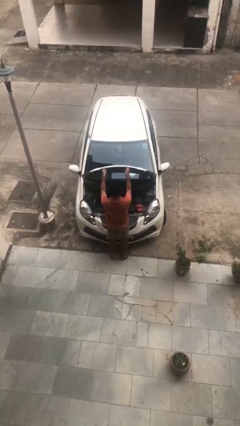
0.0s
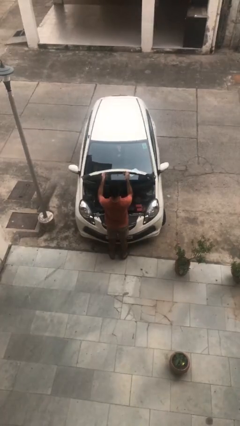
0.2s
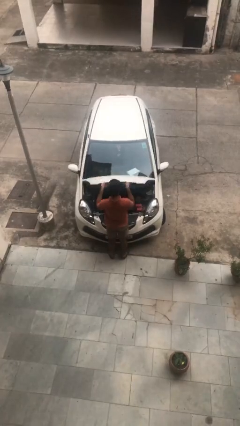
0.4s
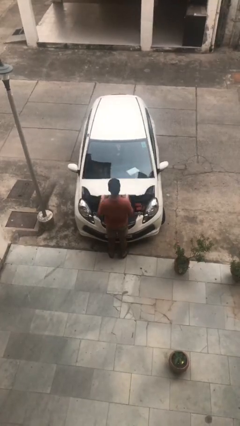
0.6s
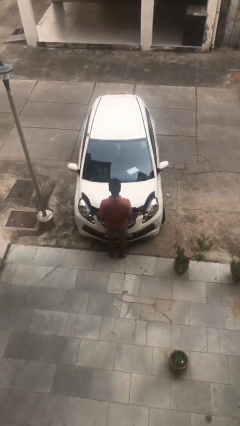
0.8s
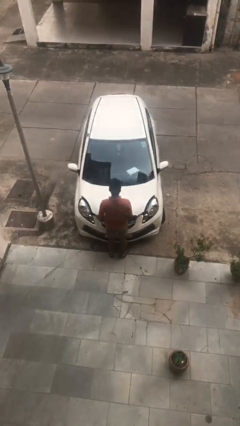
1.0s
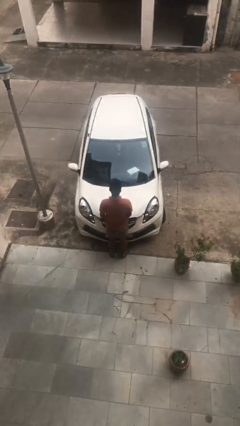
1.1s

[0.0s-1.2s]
person closes car hood

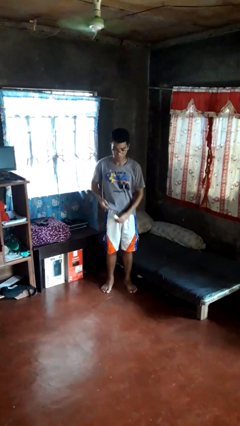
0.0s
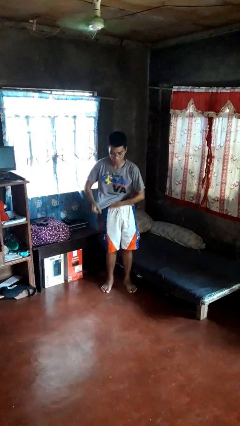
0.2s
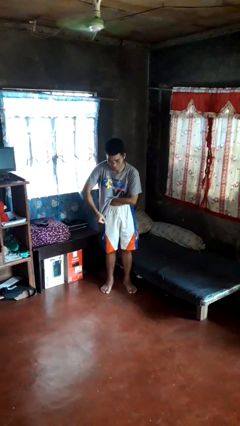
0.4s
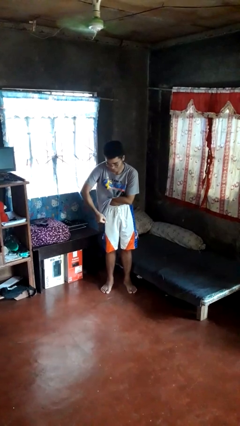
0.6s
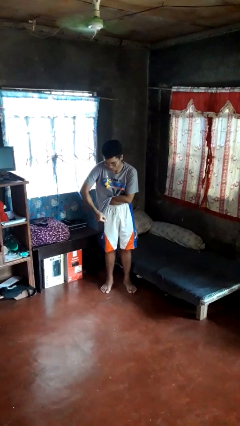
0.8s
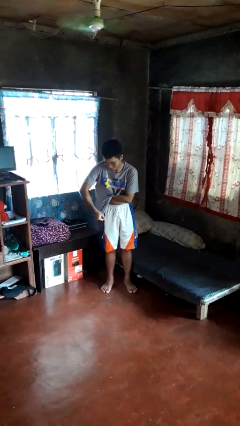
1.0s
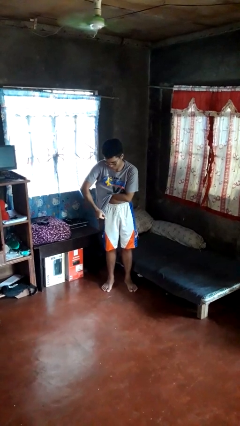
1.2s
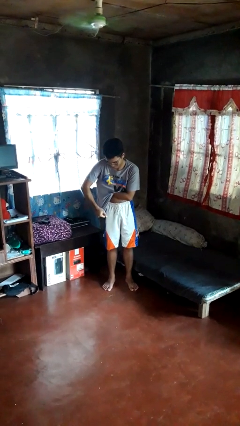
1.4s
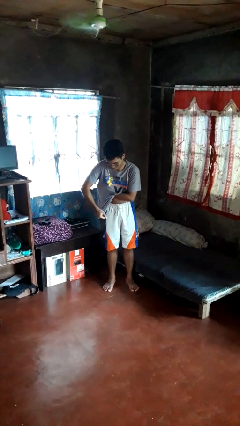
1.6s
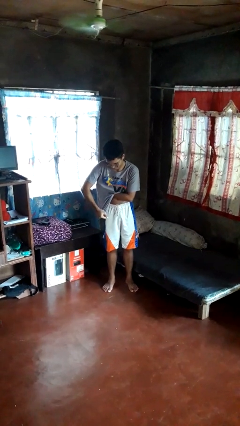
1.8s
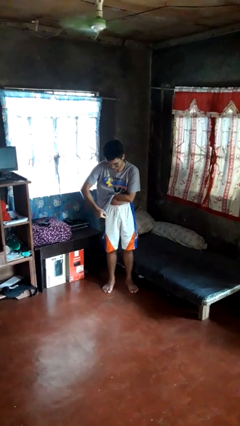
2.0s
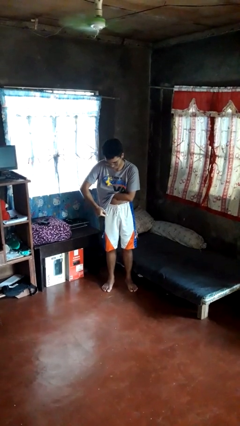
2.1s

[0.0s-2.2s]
person applies deodorant

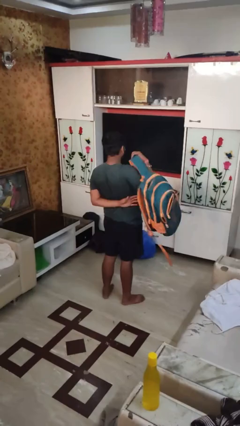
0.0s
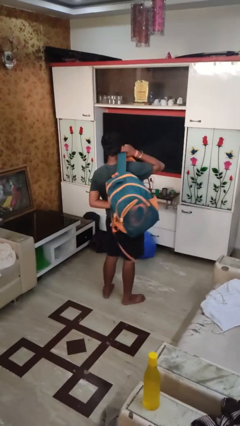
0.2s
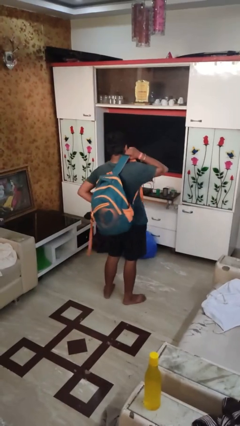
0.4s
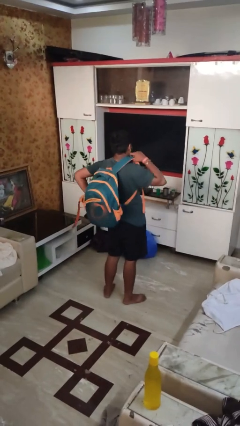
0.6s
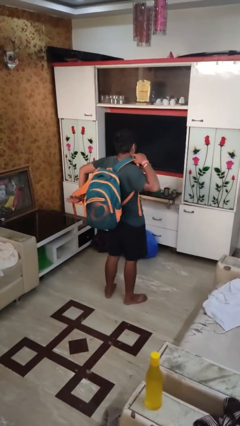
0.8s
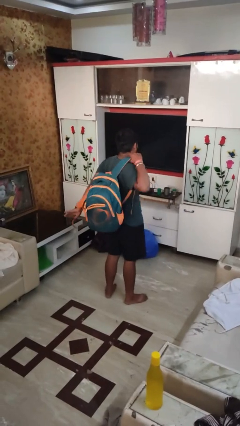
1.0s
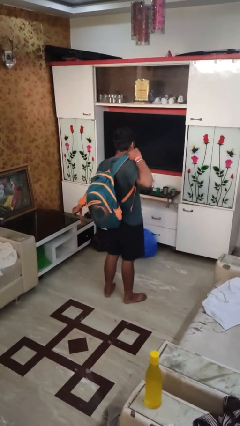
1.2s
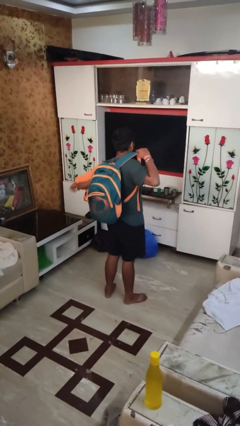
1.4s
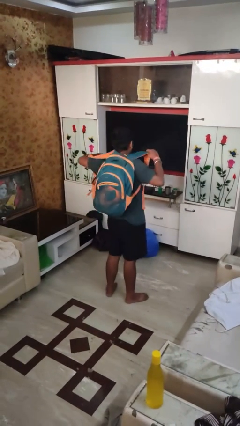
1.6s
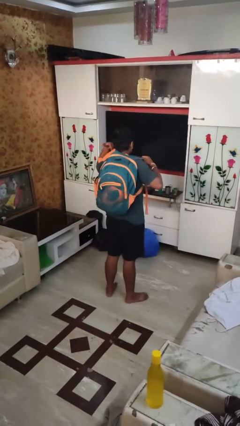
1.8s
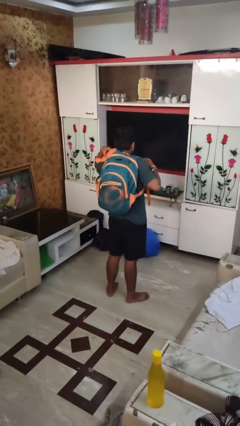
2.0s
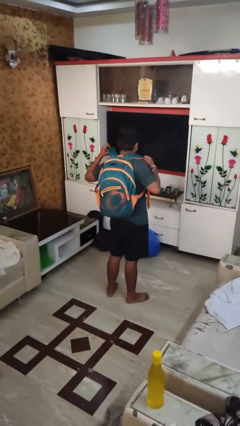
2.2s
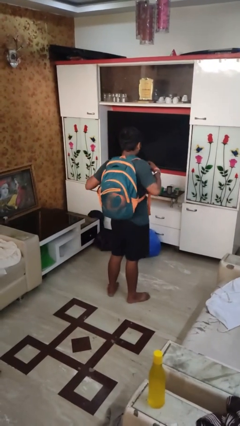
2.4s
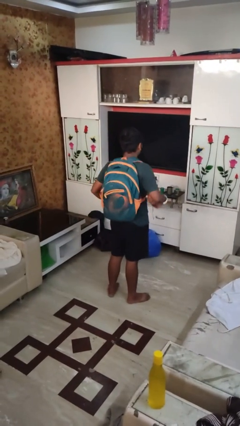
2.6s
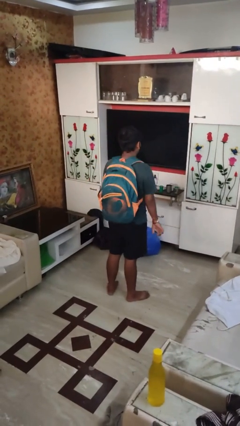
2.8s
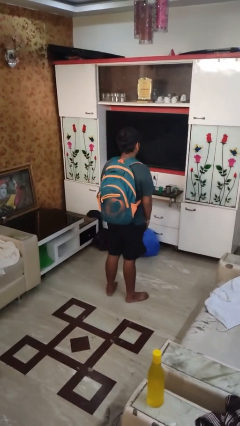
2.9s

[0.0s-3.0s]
person puts on backpack

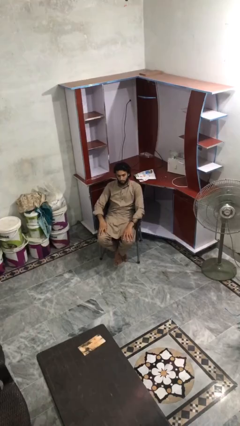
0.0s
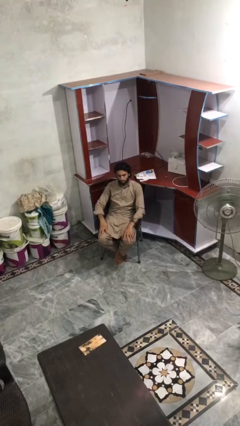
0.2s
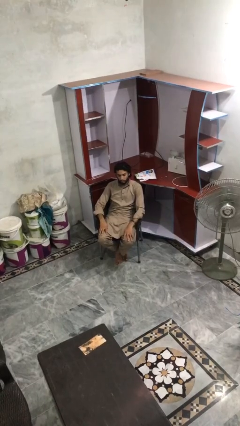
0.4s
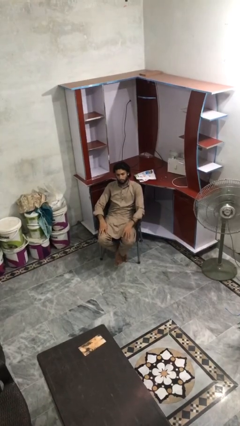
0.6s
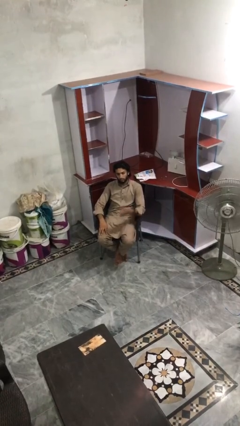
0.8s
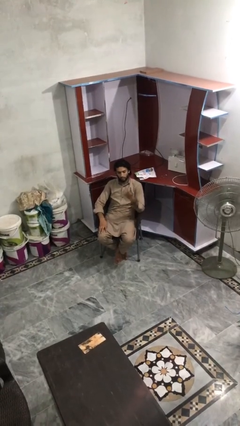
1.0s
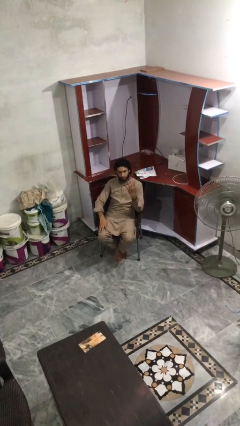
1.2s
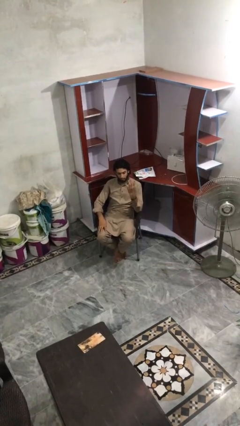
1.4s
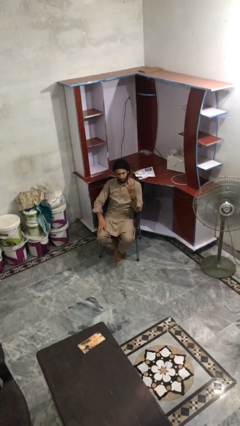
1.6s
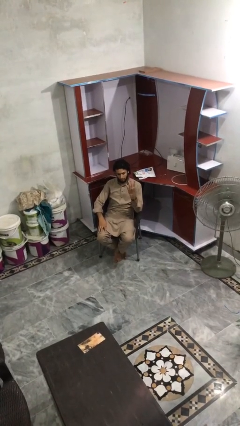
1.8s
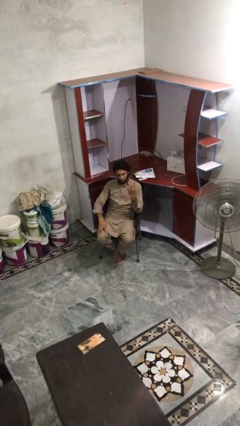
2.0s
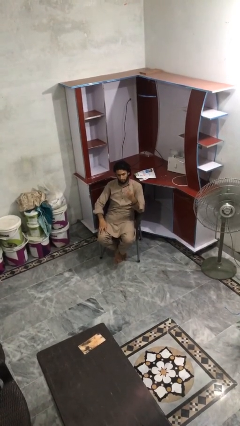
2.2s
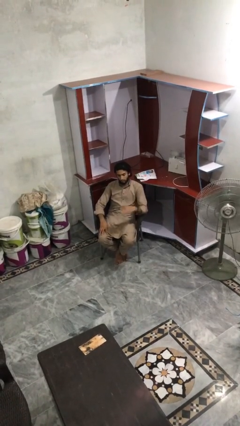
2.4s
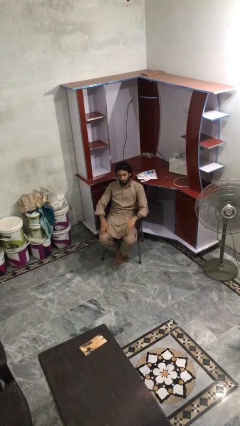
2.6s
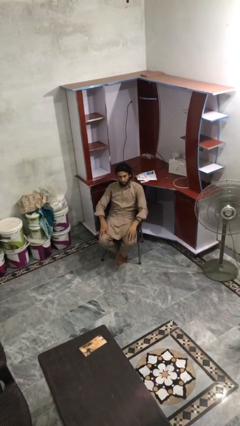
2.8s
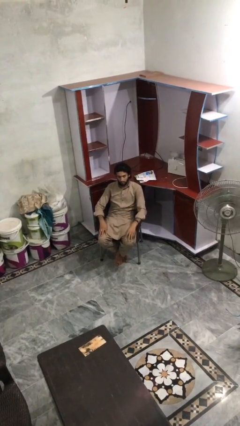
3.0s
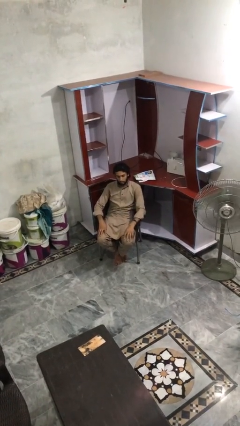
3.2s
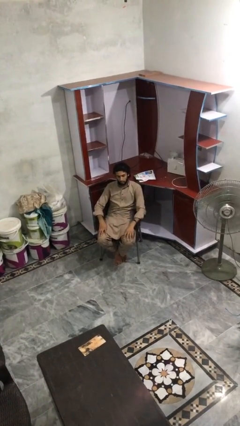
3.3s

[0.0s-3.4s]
person gestures number four

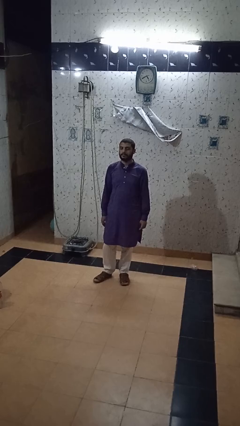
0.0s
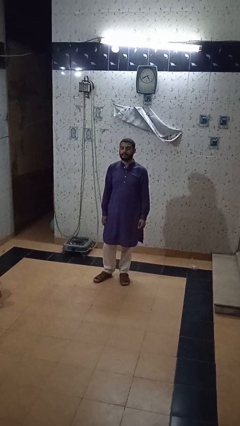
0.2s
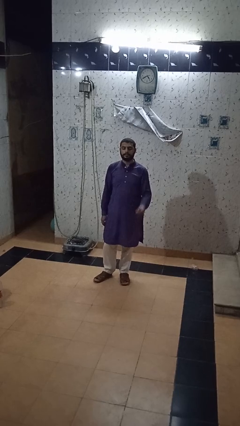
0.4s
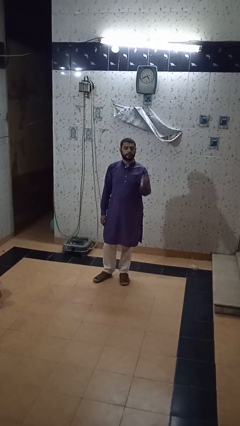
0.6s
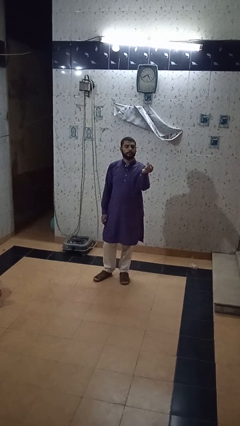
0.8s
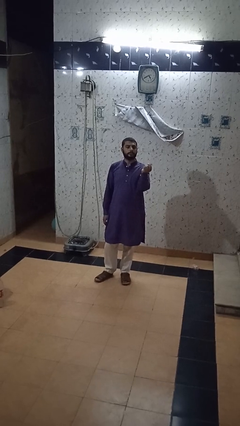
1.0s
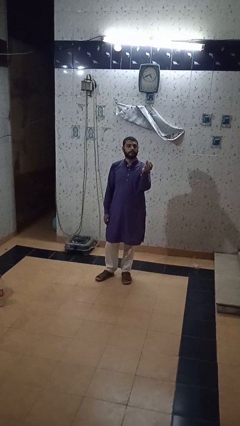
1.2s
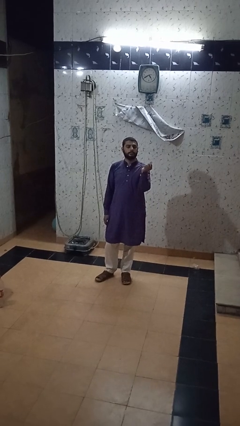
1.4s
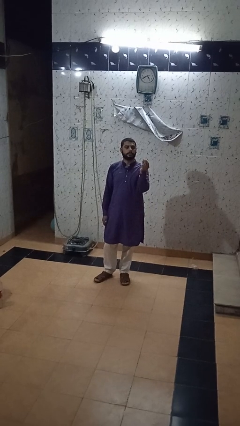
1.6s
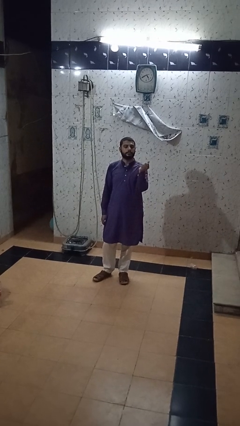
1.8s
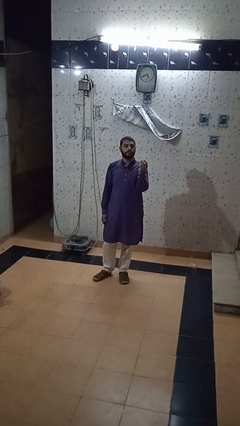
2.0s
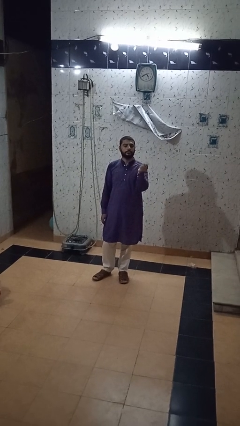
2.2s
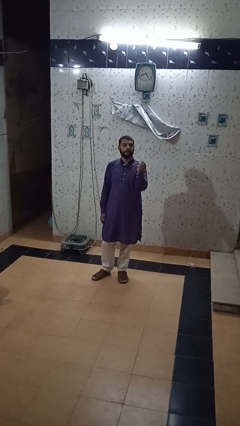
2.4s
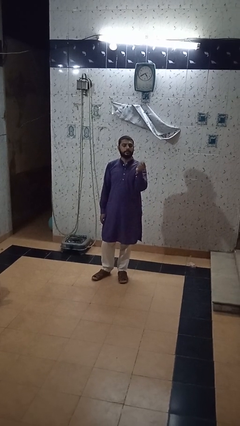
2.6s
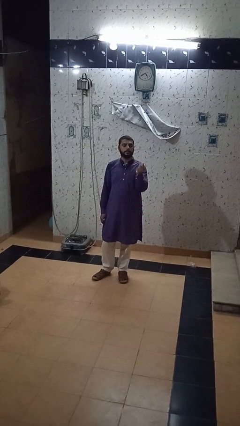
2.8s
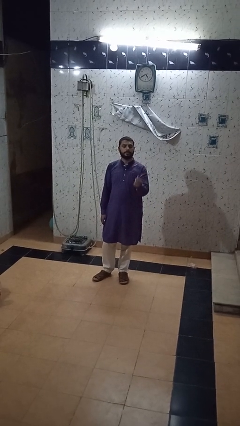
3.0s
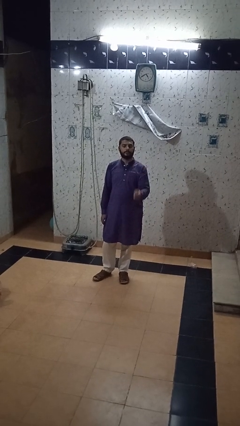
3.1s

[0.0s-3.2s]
person snaps fingers

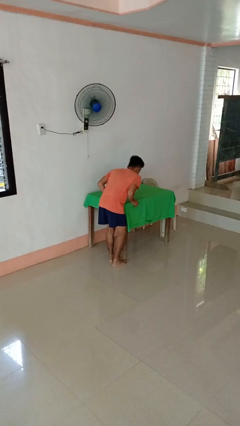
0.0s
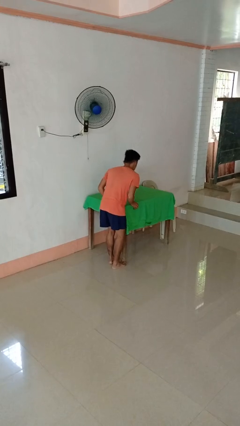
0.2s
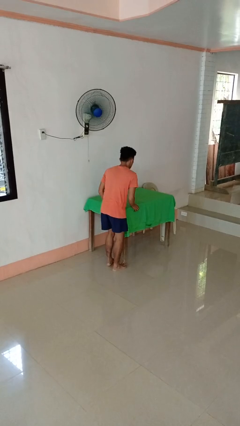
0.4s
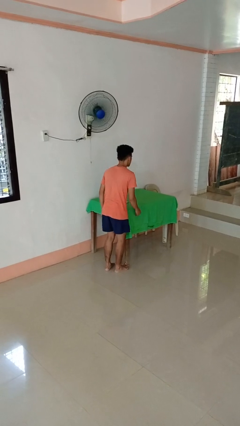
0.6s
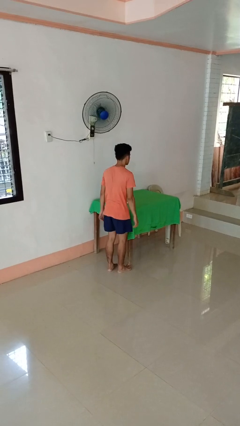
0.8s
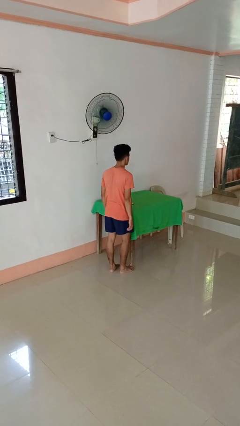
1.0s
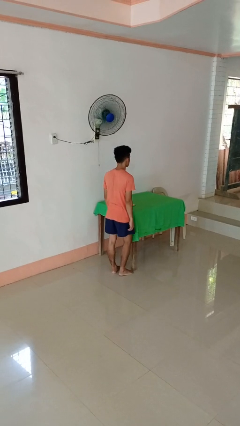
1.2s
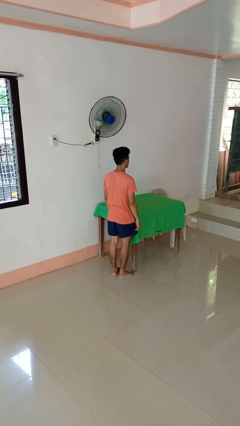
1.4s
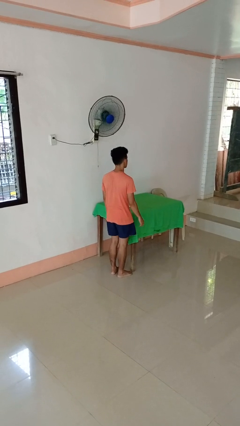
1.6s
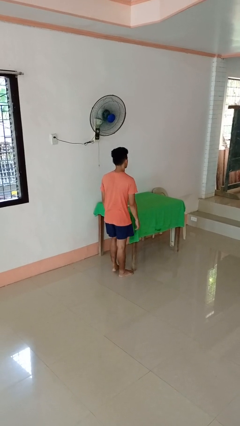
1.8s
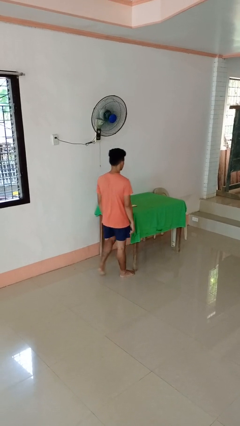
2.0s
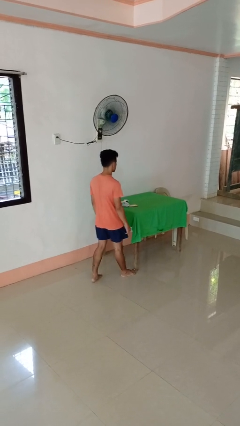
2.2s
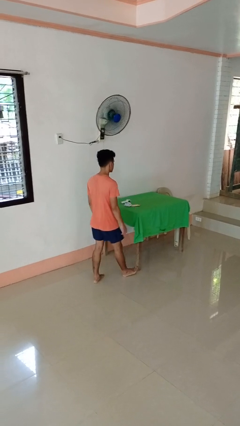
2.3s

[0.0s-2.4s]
person stubs toe

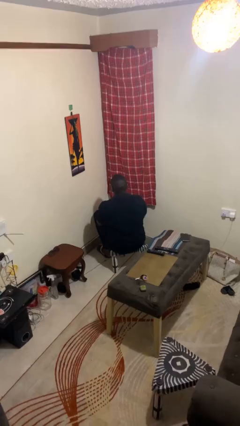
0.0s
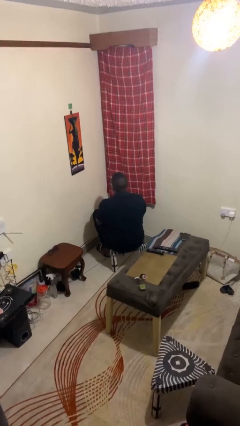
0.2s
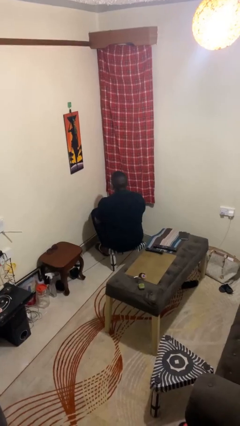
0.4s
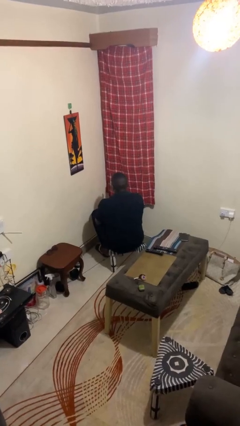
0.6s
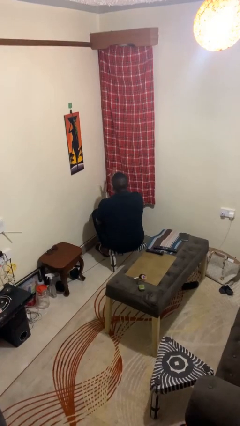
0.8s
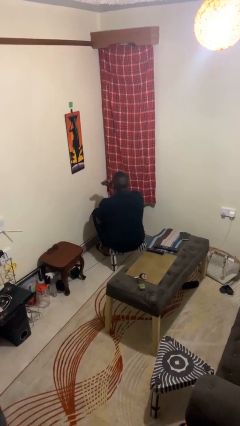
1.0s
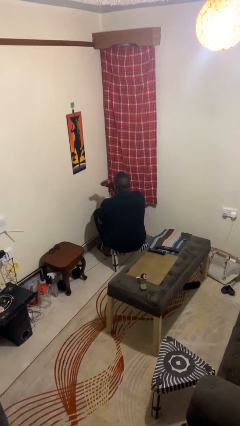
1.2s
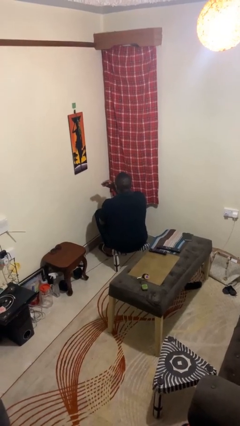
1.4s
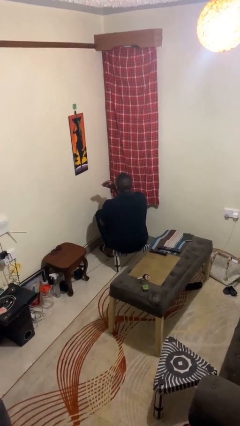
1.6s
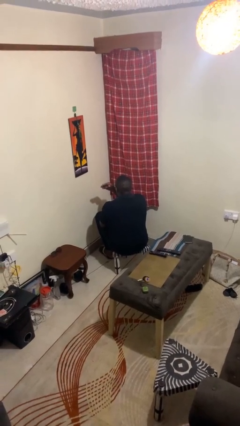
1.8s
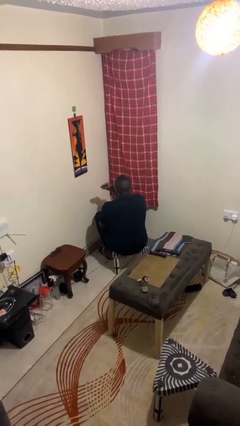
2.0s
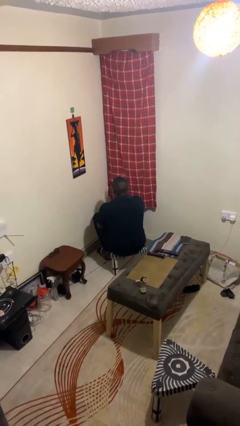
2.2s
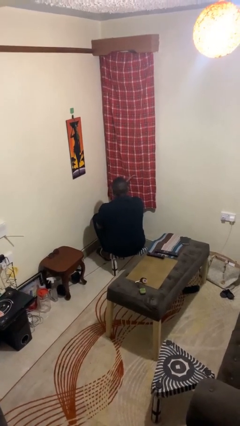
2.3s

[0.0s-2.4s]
person gestures swipe left
